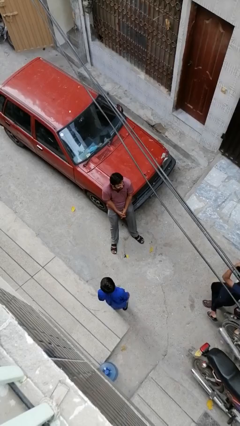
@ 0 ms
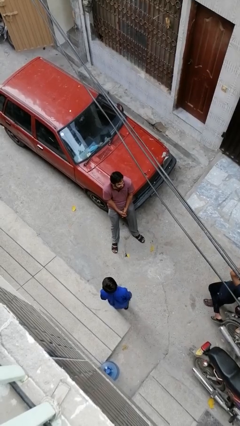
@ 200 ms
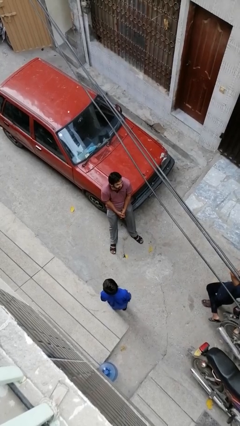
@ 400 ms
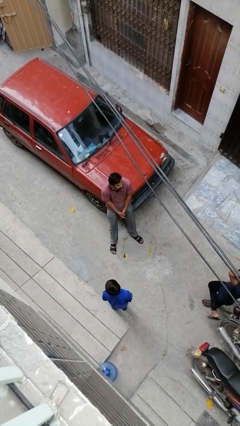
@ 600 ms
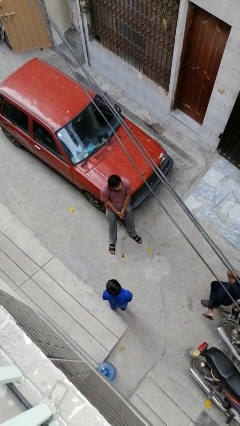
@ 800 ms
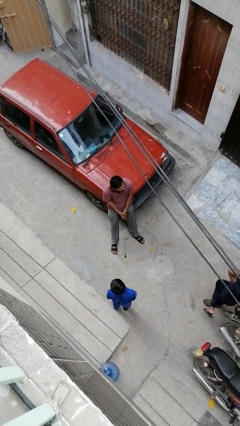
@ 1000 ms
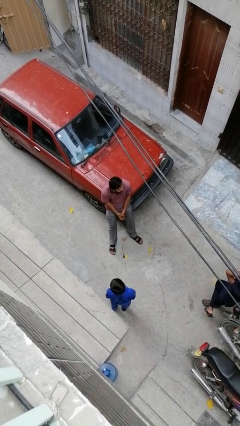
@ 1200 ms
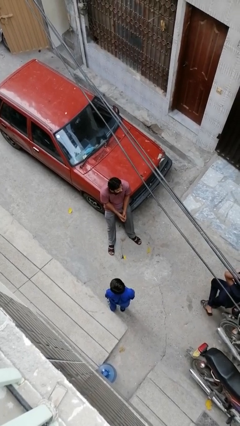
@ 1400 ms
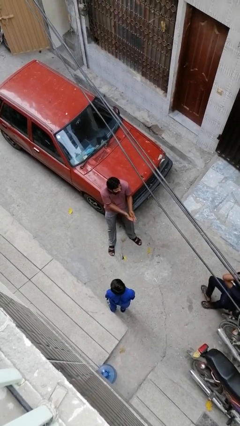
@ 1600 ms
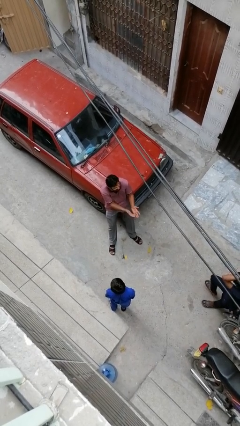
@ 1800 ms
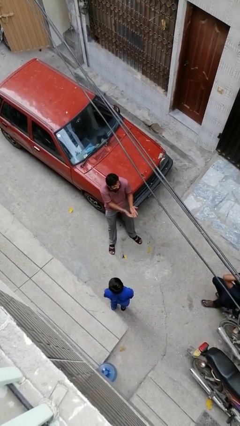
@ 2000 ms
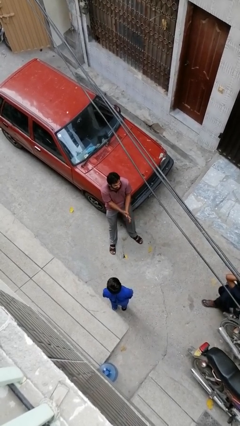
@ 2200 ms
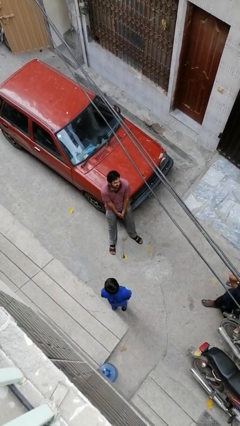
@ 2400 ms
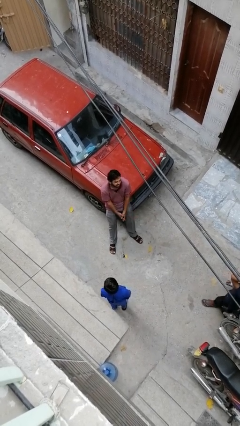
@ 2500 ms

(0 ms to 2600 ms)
person laughs with person

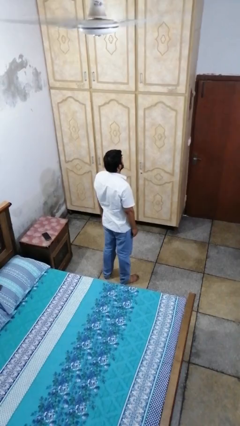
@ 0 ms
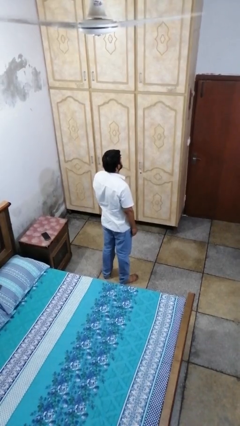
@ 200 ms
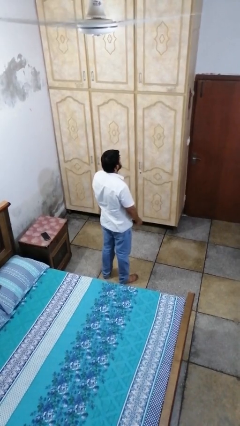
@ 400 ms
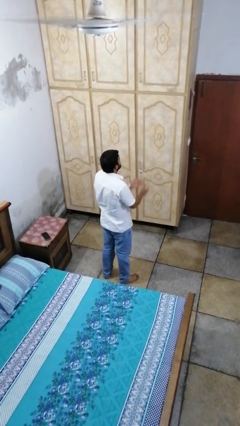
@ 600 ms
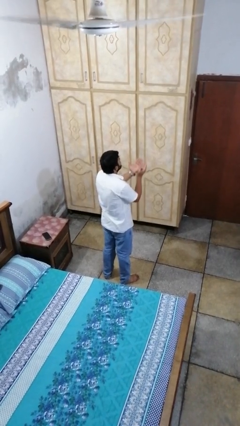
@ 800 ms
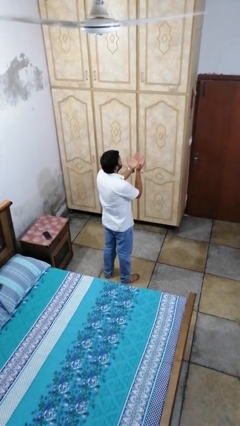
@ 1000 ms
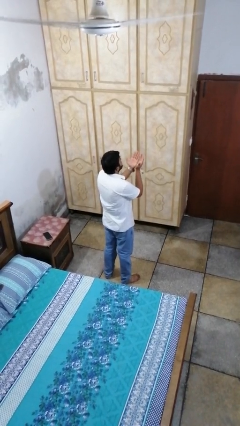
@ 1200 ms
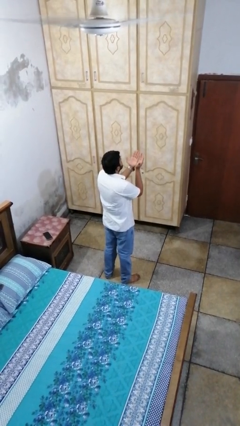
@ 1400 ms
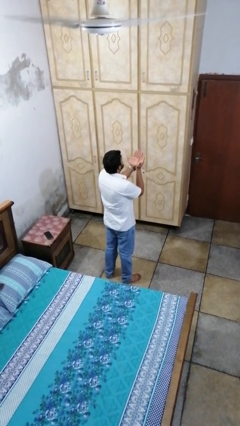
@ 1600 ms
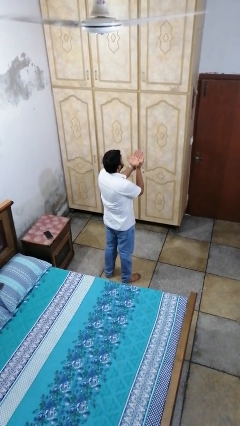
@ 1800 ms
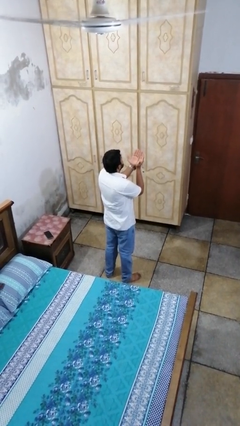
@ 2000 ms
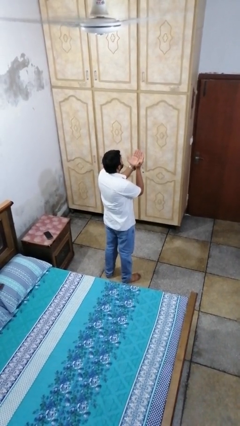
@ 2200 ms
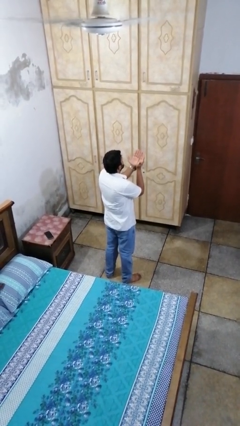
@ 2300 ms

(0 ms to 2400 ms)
person prays

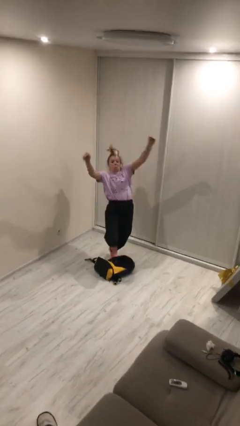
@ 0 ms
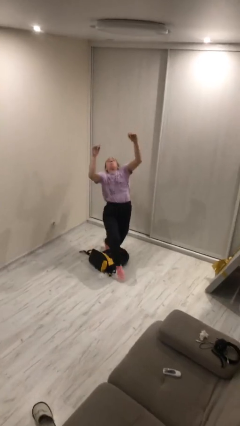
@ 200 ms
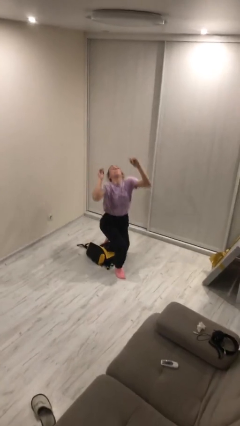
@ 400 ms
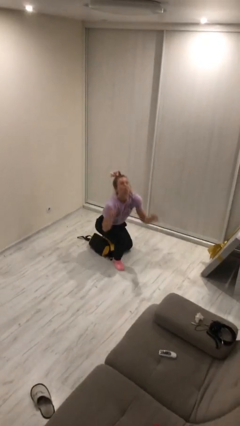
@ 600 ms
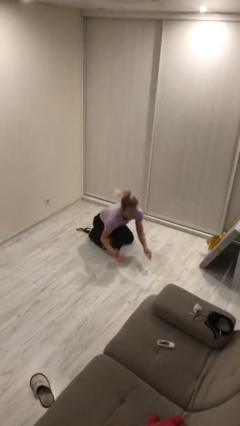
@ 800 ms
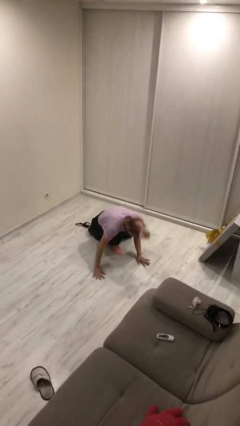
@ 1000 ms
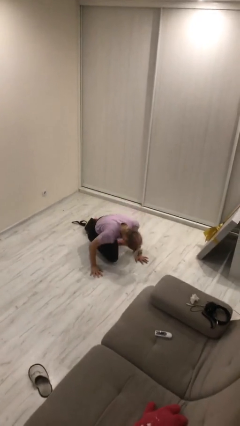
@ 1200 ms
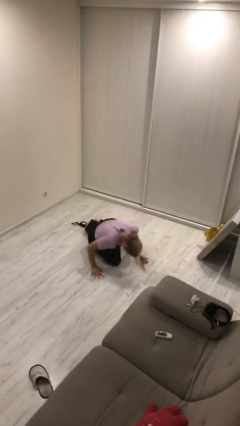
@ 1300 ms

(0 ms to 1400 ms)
person trips on object on floor

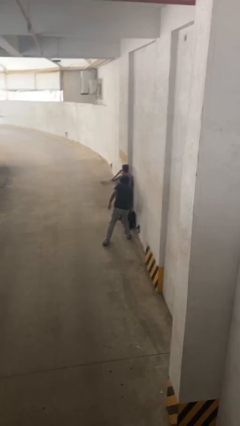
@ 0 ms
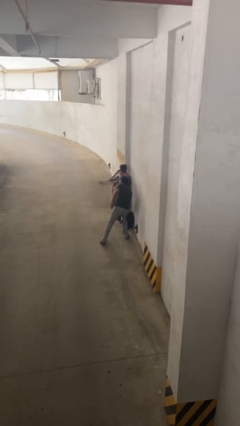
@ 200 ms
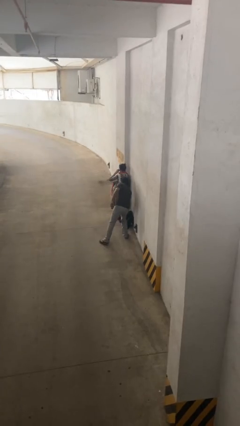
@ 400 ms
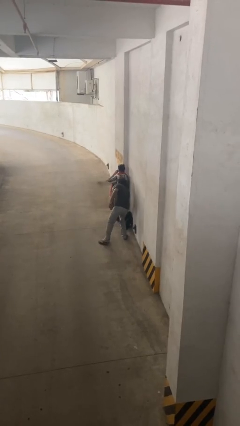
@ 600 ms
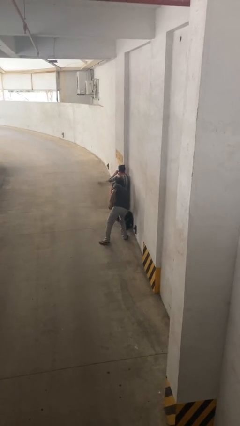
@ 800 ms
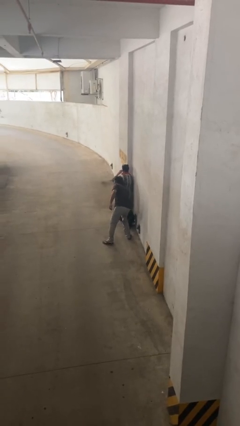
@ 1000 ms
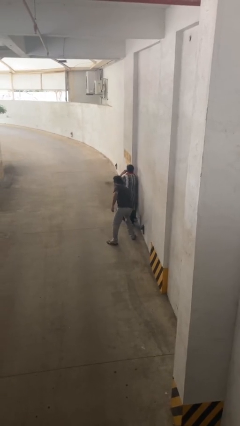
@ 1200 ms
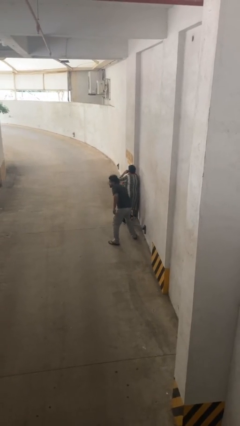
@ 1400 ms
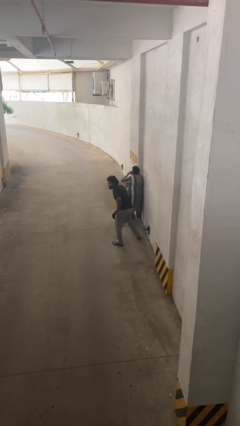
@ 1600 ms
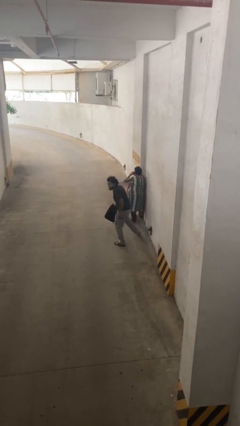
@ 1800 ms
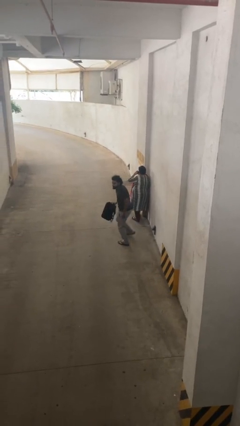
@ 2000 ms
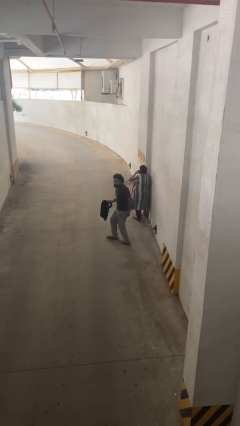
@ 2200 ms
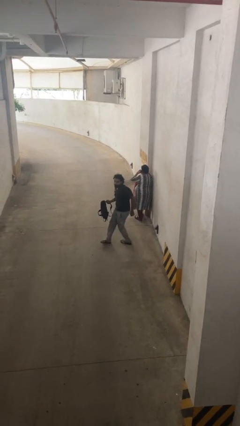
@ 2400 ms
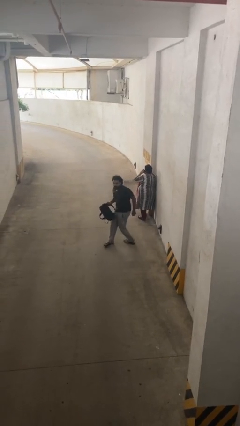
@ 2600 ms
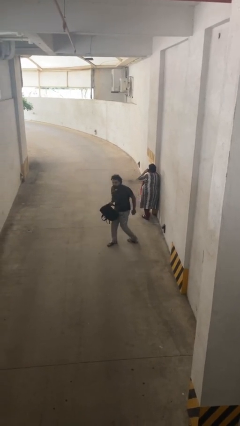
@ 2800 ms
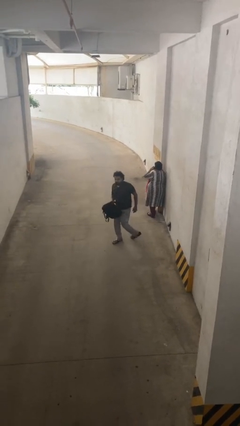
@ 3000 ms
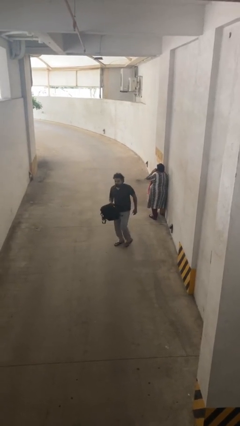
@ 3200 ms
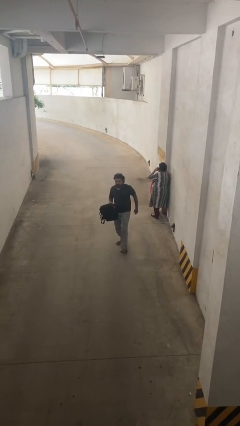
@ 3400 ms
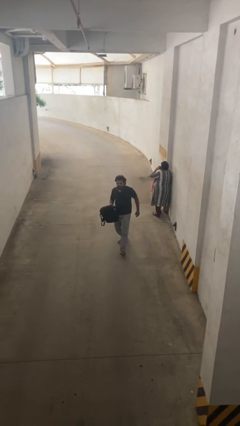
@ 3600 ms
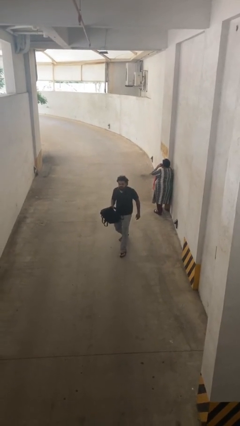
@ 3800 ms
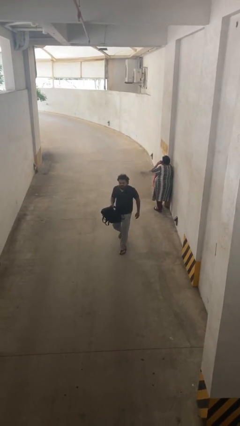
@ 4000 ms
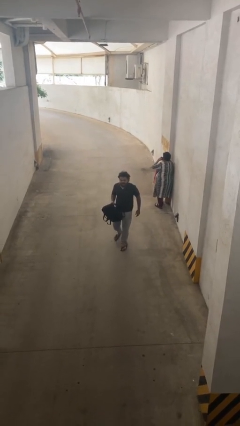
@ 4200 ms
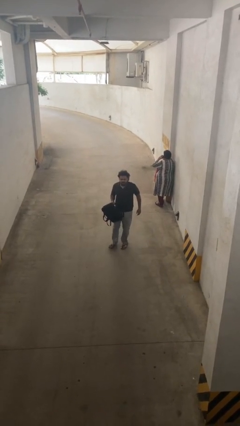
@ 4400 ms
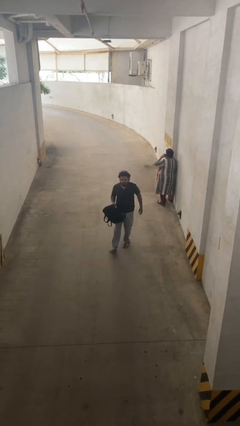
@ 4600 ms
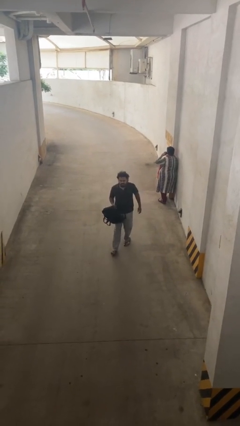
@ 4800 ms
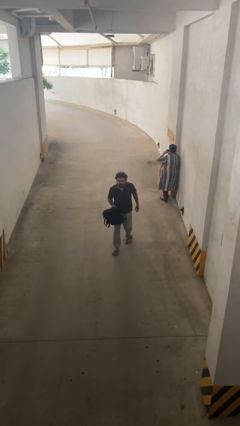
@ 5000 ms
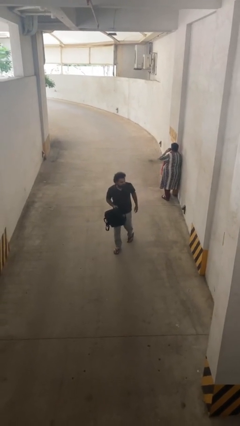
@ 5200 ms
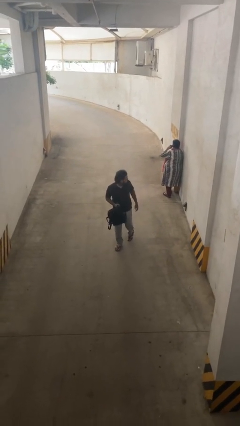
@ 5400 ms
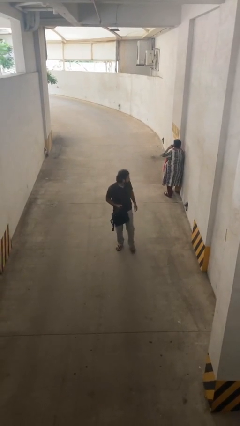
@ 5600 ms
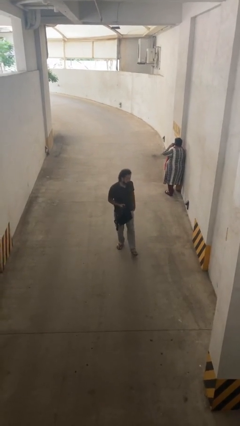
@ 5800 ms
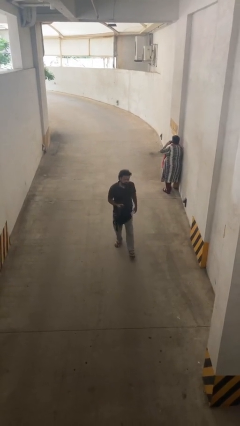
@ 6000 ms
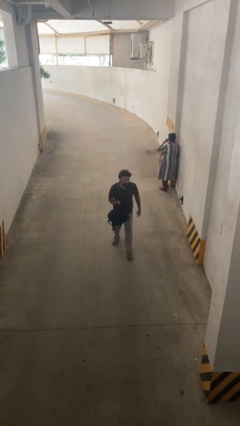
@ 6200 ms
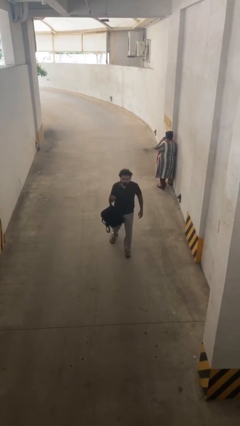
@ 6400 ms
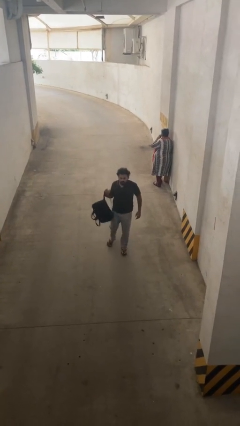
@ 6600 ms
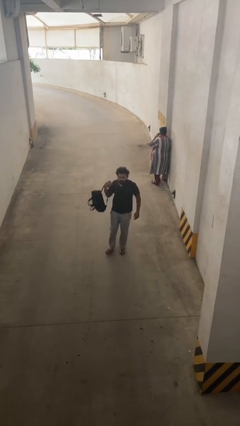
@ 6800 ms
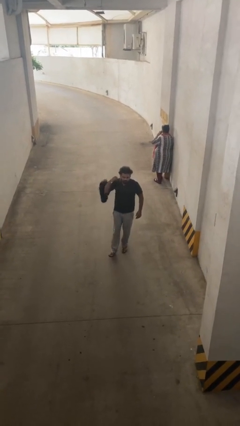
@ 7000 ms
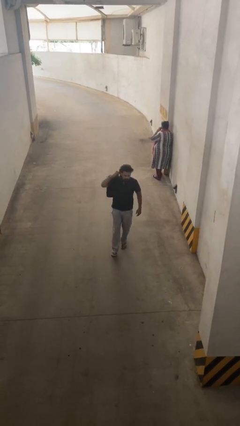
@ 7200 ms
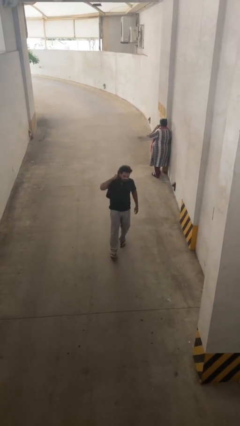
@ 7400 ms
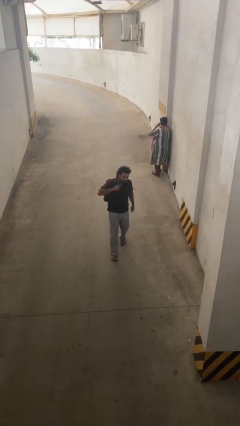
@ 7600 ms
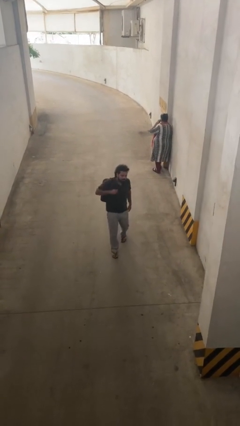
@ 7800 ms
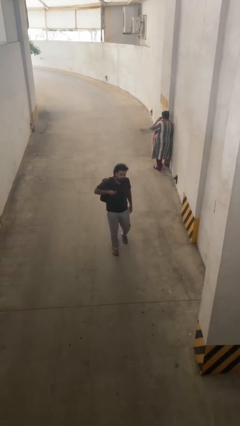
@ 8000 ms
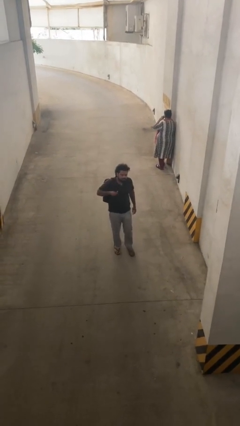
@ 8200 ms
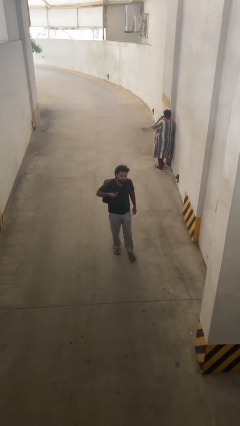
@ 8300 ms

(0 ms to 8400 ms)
person steals object from person

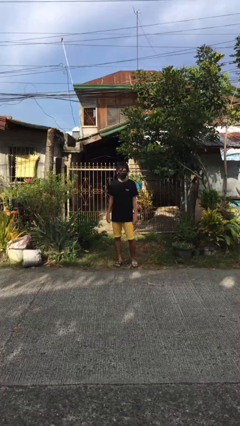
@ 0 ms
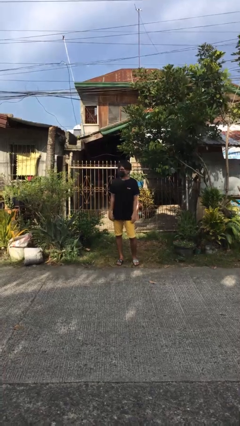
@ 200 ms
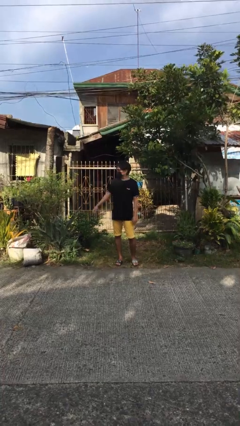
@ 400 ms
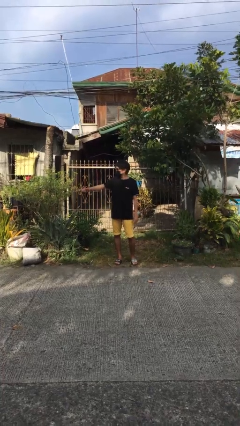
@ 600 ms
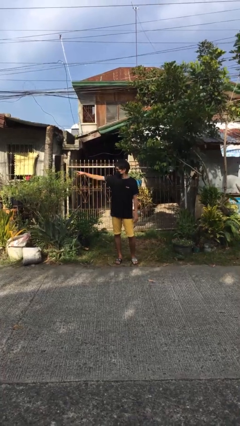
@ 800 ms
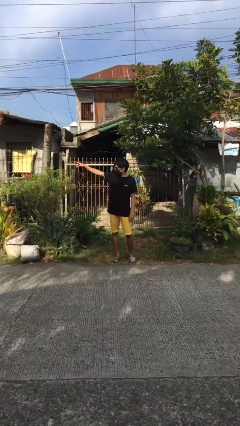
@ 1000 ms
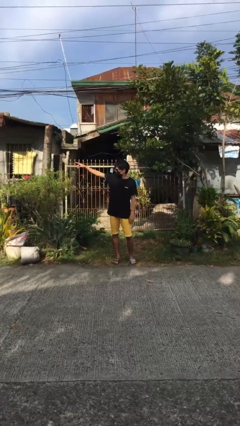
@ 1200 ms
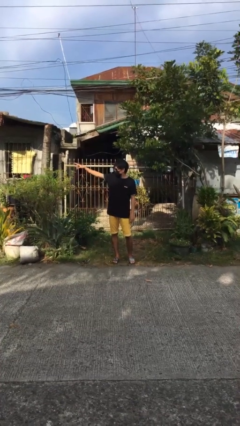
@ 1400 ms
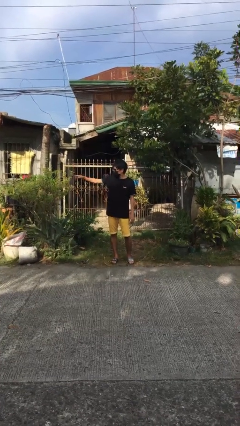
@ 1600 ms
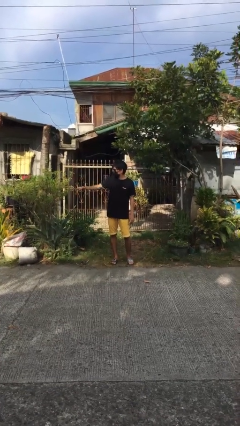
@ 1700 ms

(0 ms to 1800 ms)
person points at person

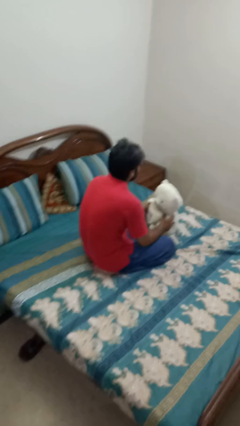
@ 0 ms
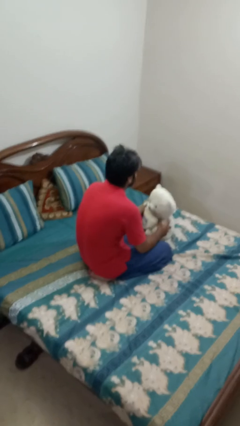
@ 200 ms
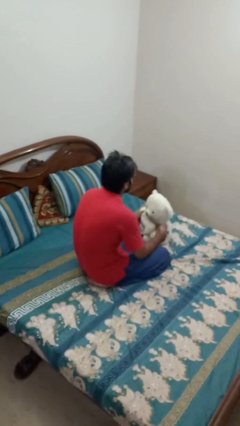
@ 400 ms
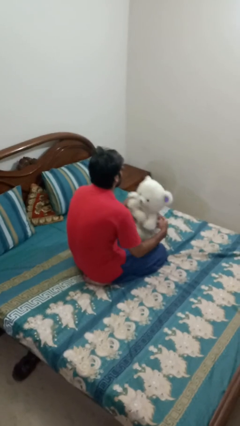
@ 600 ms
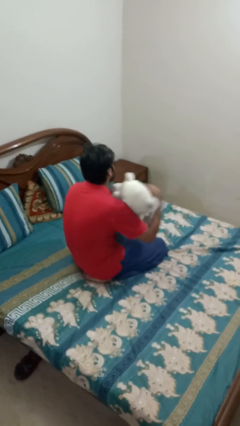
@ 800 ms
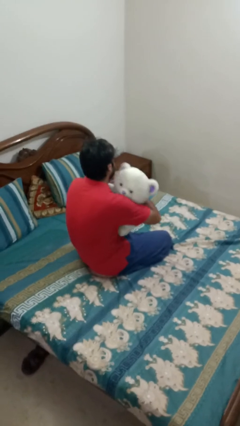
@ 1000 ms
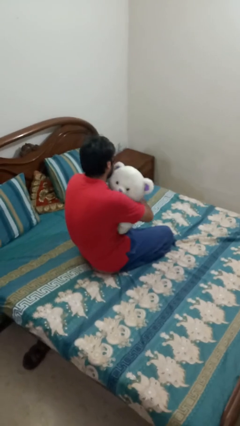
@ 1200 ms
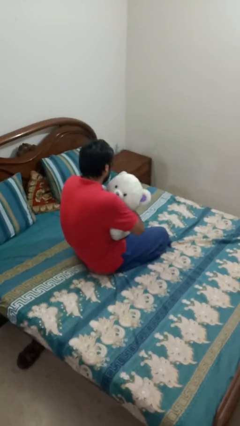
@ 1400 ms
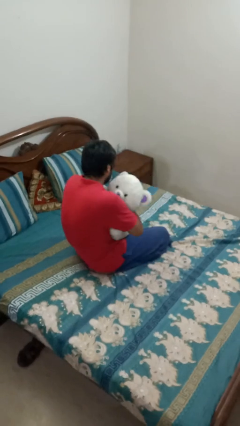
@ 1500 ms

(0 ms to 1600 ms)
person hugs stuffed animal
